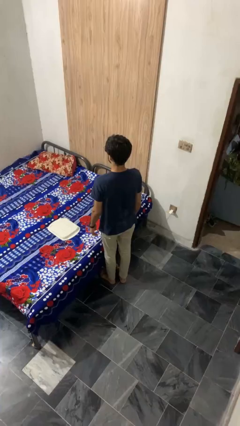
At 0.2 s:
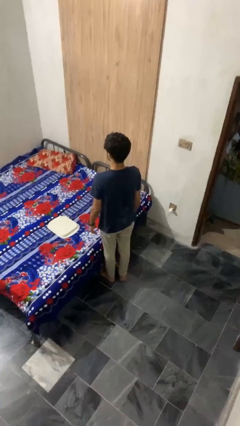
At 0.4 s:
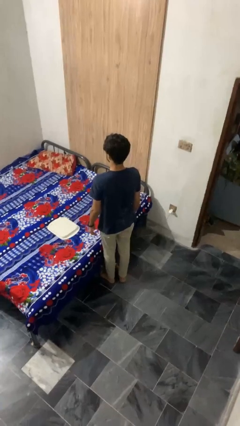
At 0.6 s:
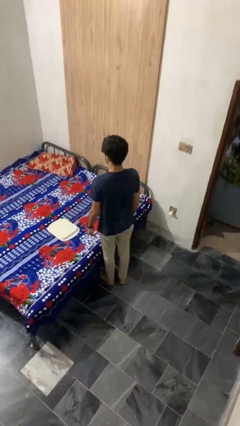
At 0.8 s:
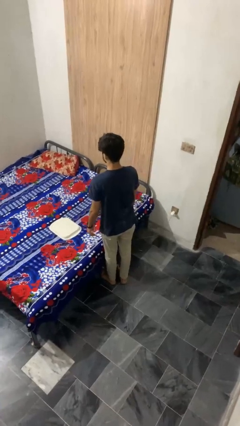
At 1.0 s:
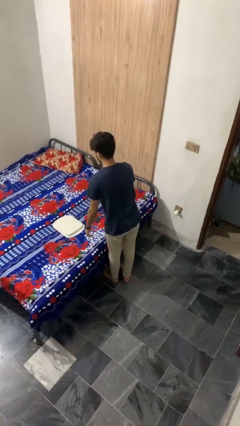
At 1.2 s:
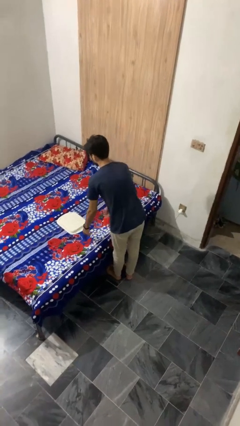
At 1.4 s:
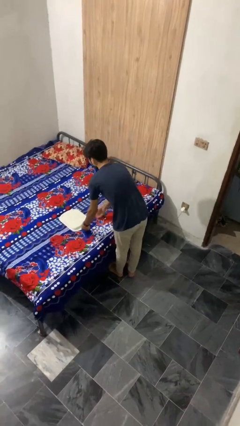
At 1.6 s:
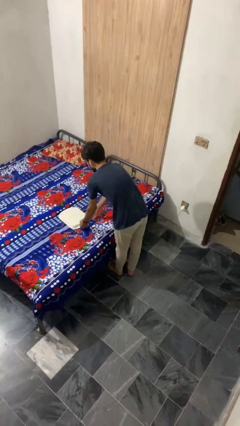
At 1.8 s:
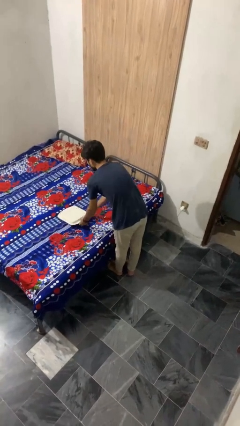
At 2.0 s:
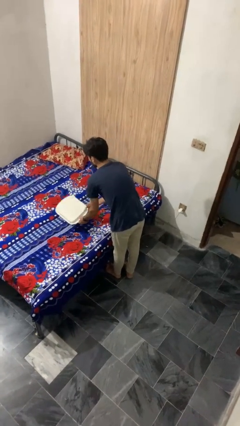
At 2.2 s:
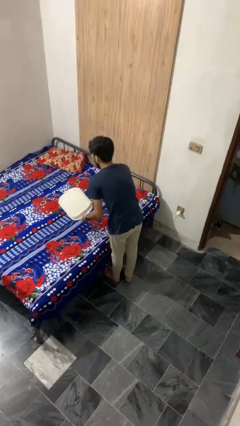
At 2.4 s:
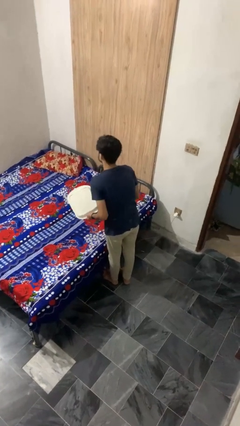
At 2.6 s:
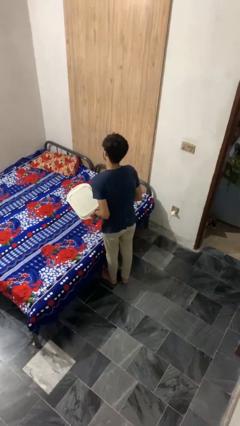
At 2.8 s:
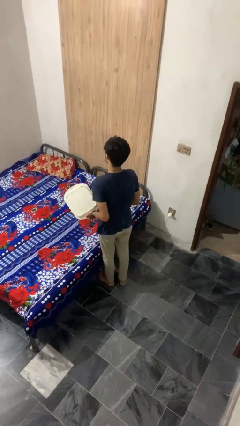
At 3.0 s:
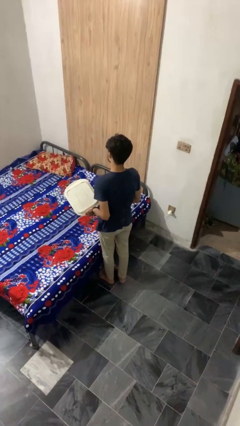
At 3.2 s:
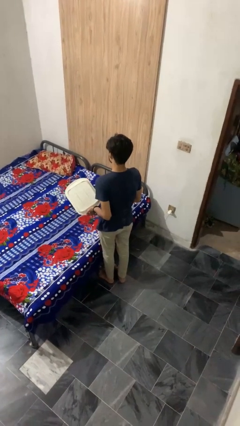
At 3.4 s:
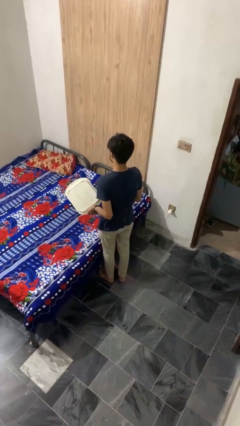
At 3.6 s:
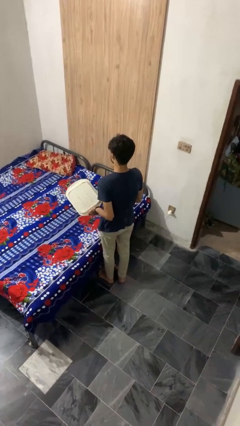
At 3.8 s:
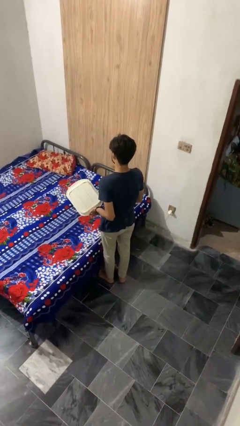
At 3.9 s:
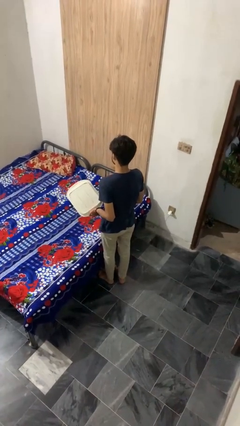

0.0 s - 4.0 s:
person picks up object from bed

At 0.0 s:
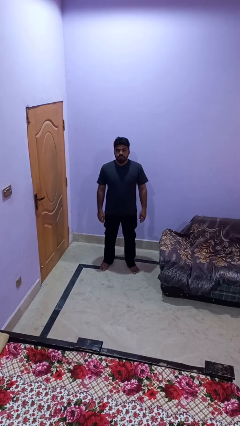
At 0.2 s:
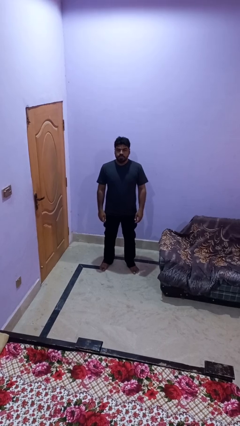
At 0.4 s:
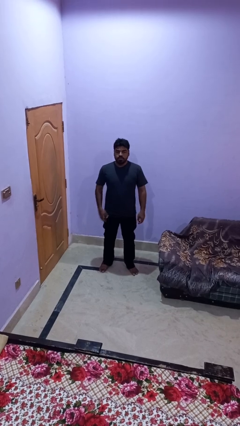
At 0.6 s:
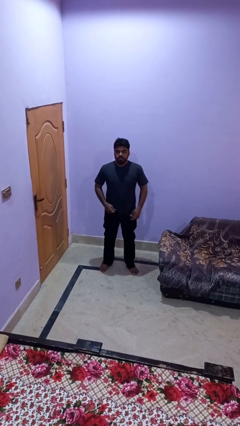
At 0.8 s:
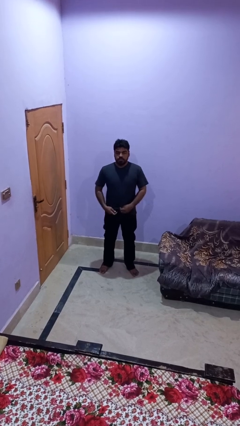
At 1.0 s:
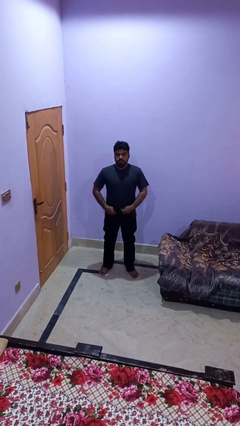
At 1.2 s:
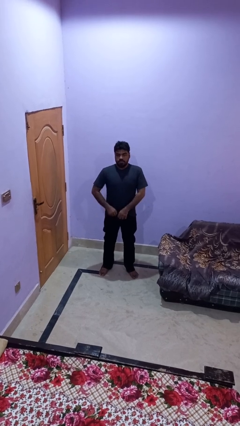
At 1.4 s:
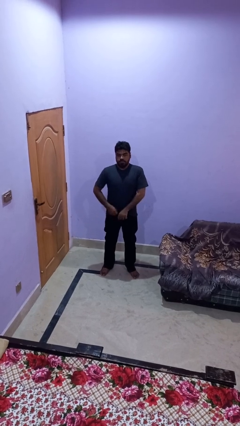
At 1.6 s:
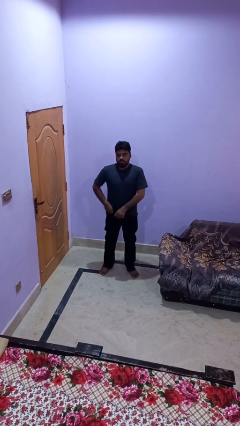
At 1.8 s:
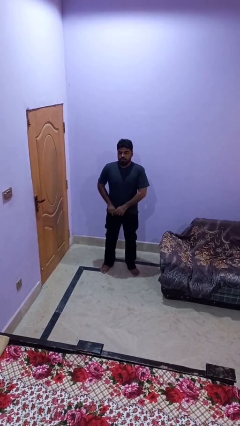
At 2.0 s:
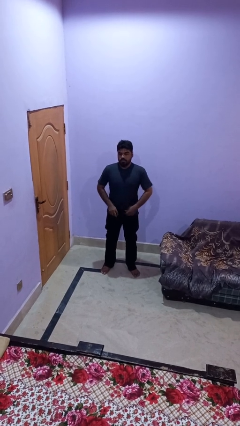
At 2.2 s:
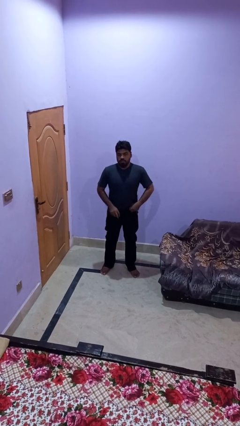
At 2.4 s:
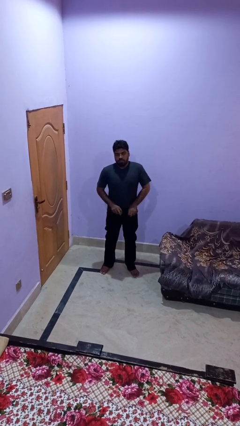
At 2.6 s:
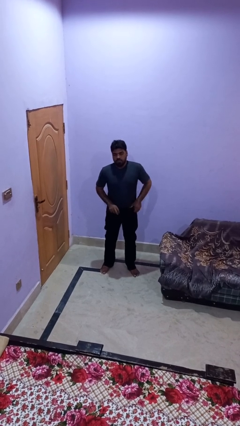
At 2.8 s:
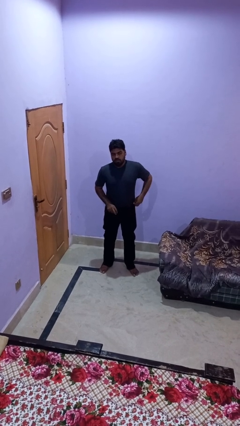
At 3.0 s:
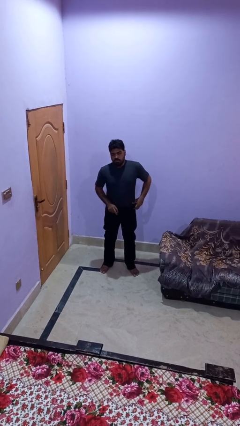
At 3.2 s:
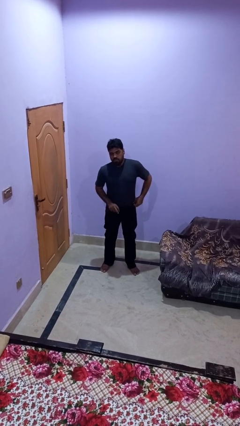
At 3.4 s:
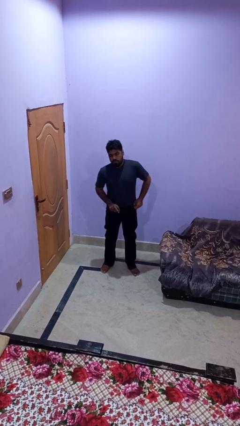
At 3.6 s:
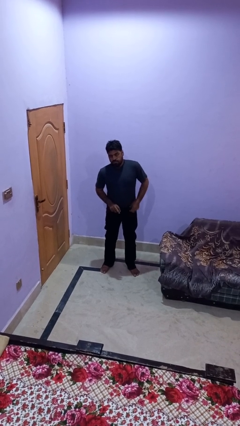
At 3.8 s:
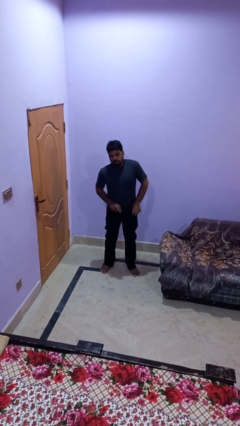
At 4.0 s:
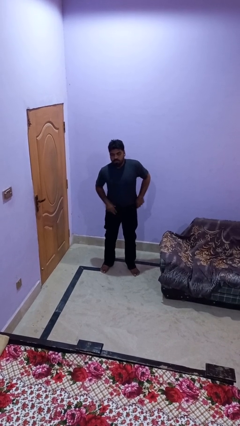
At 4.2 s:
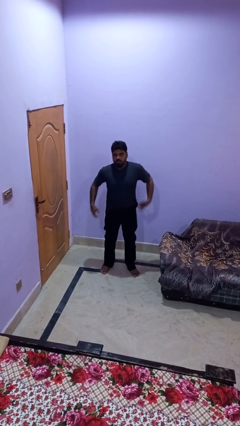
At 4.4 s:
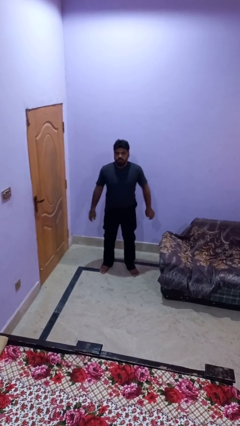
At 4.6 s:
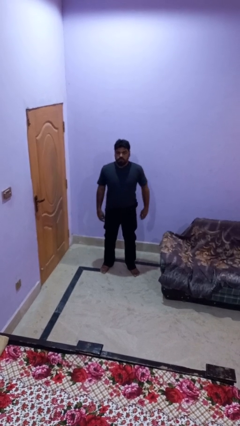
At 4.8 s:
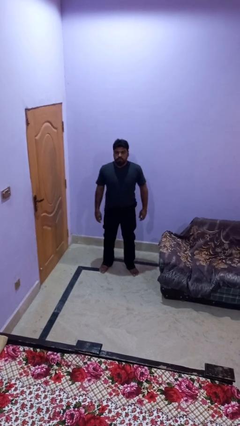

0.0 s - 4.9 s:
person tucks in shirt

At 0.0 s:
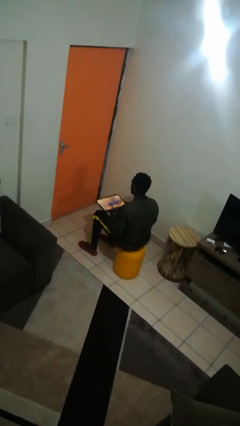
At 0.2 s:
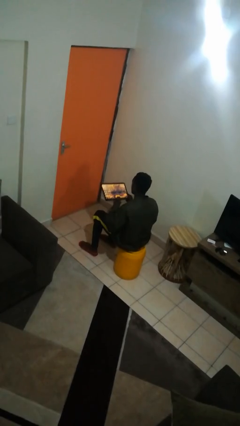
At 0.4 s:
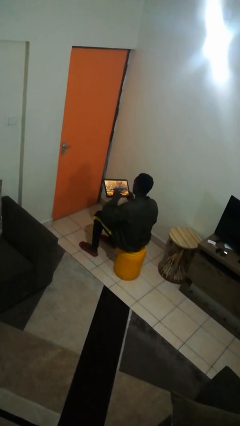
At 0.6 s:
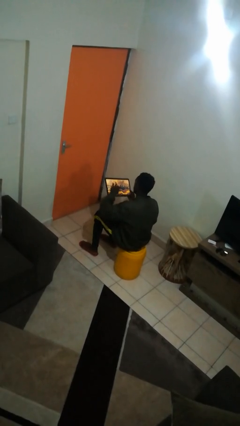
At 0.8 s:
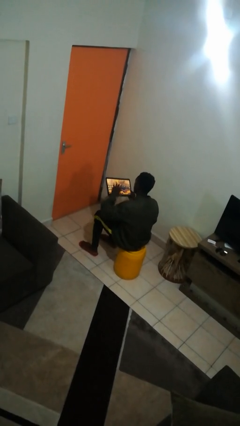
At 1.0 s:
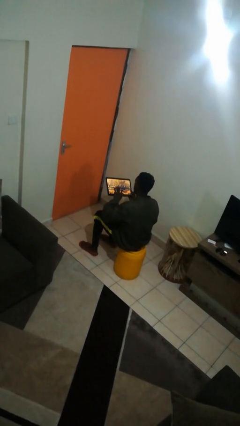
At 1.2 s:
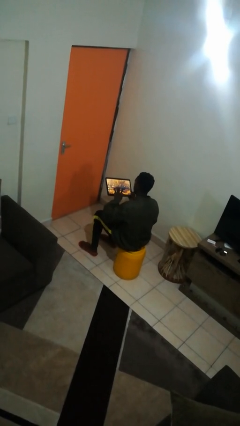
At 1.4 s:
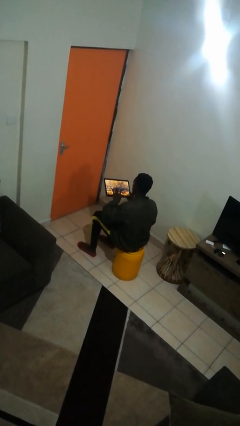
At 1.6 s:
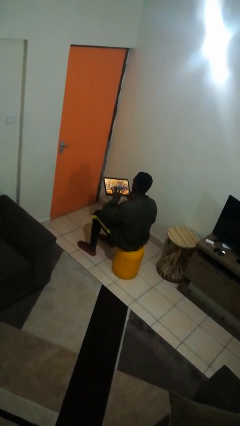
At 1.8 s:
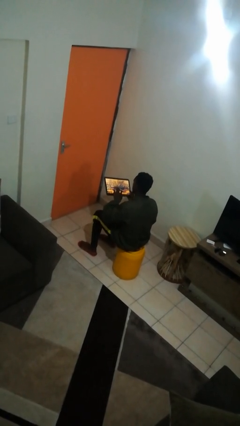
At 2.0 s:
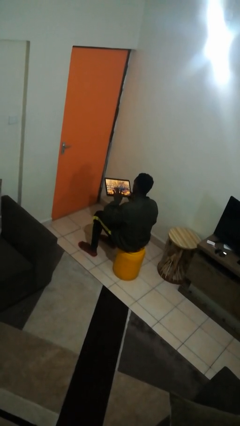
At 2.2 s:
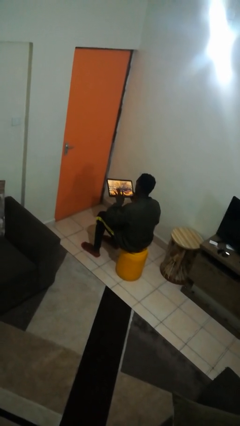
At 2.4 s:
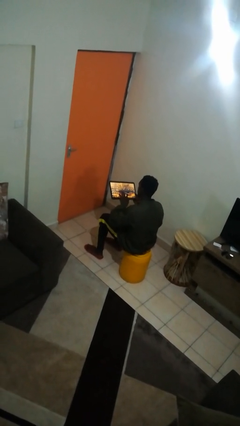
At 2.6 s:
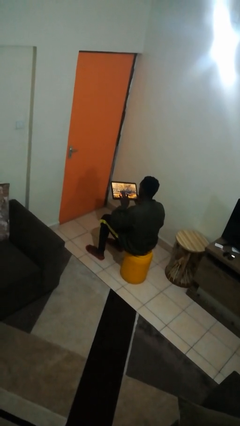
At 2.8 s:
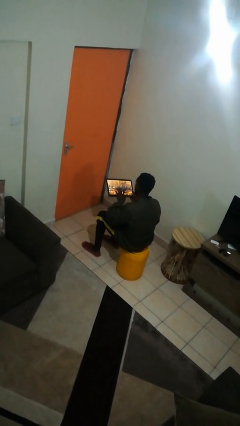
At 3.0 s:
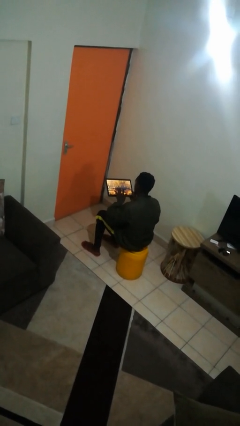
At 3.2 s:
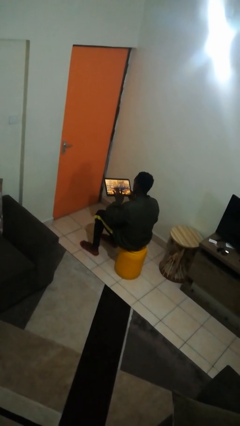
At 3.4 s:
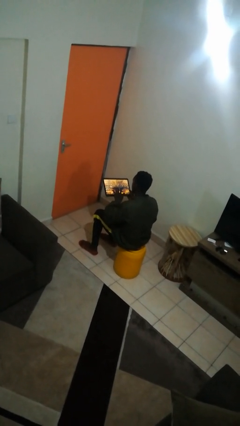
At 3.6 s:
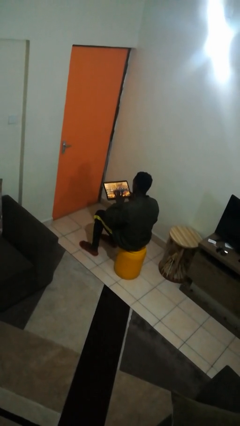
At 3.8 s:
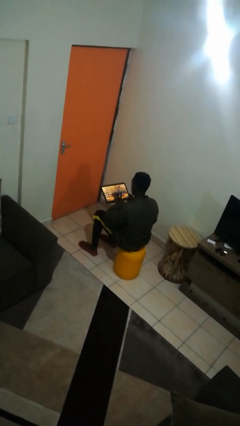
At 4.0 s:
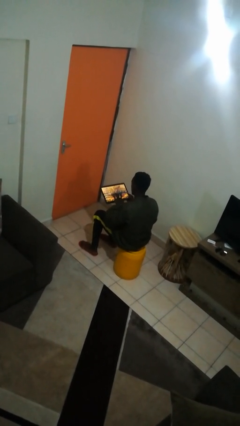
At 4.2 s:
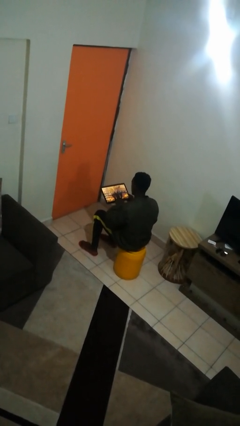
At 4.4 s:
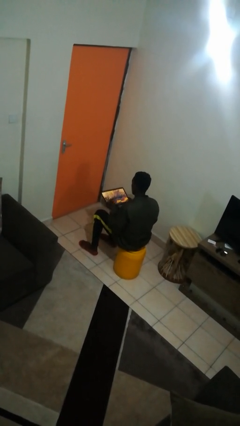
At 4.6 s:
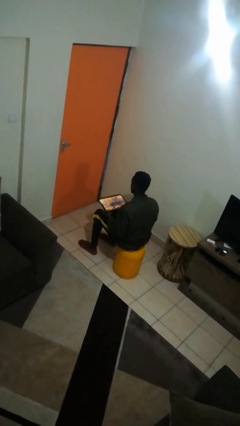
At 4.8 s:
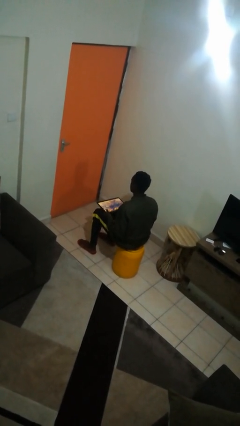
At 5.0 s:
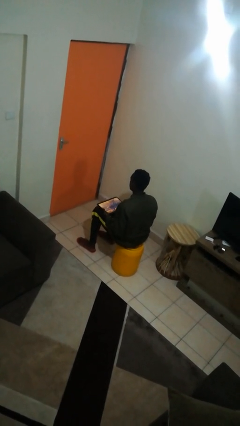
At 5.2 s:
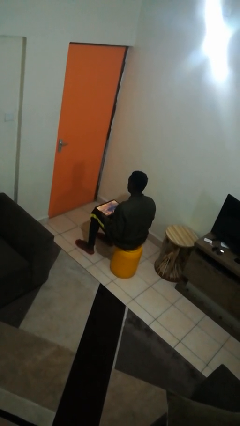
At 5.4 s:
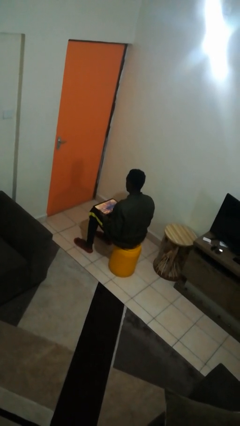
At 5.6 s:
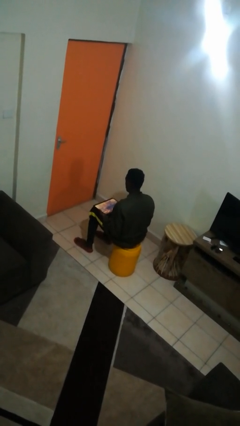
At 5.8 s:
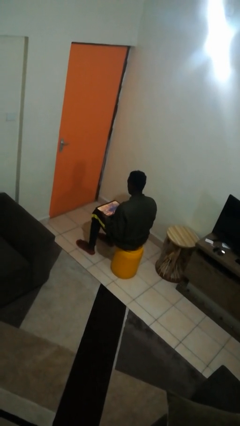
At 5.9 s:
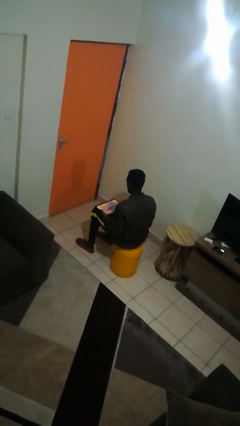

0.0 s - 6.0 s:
person interacts with tablet

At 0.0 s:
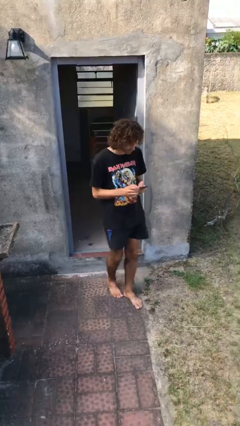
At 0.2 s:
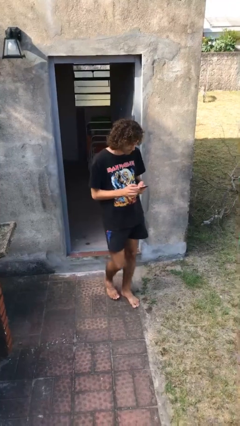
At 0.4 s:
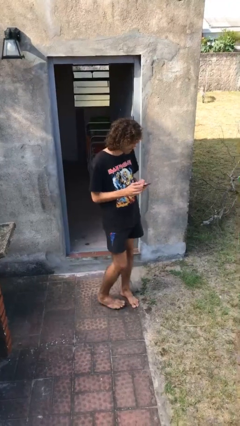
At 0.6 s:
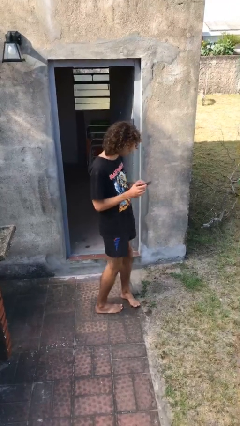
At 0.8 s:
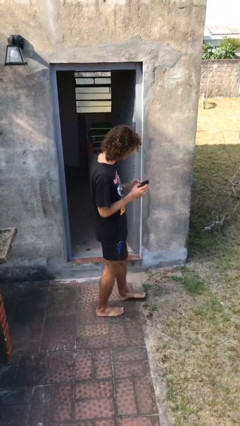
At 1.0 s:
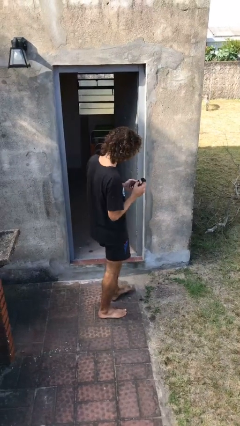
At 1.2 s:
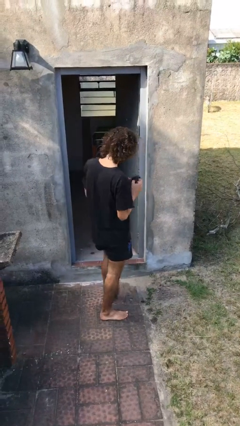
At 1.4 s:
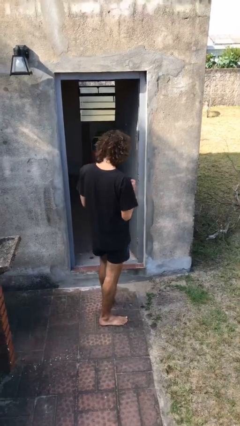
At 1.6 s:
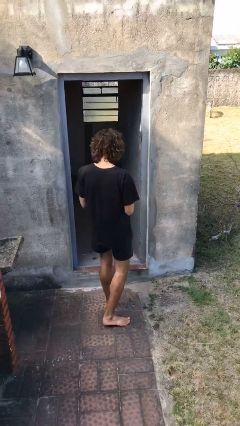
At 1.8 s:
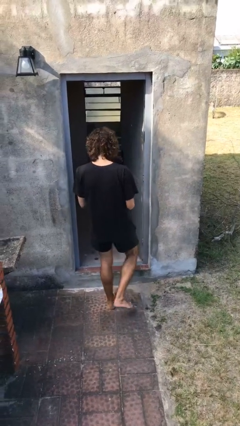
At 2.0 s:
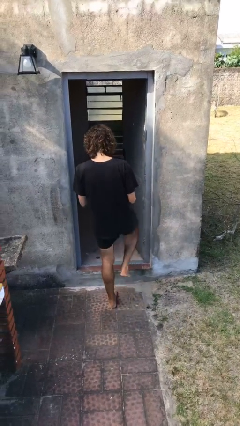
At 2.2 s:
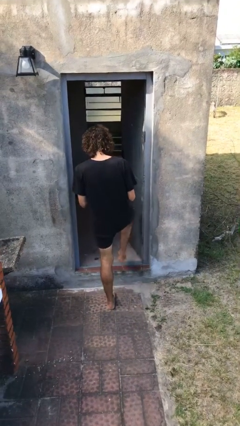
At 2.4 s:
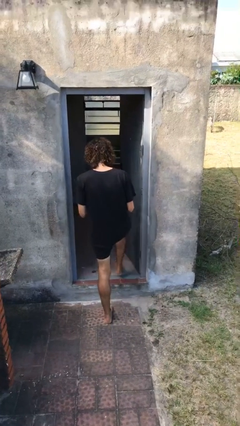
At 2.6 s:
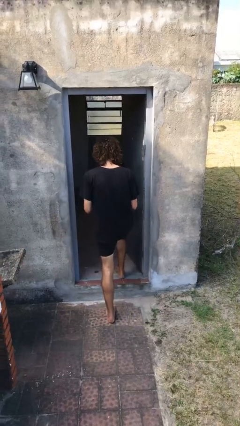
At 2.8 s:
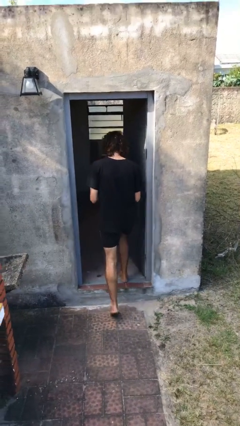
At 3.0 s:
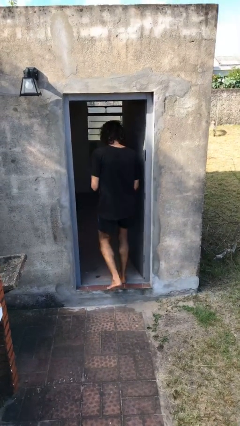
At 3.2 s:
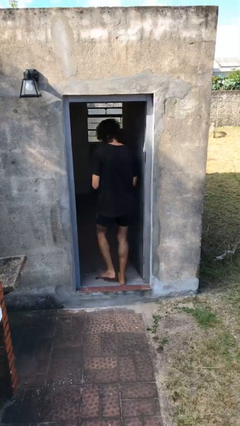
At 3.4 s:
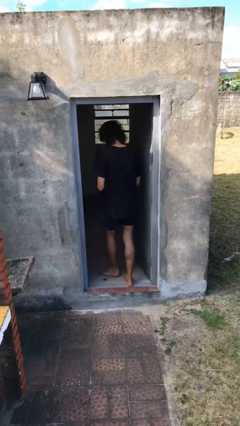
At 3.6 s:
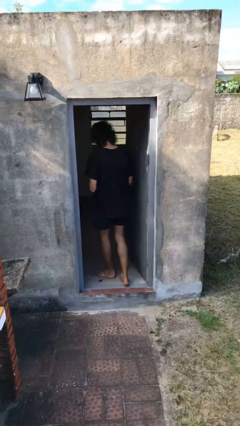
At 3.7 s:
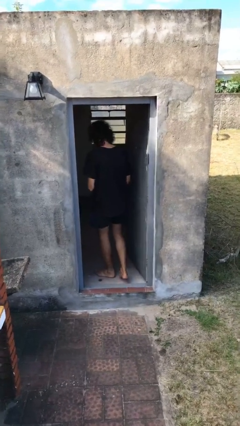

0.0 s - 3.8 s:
person exits scene through structure
